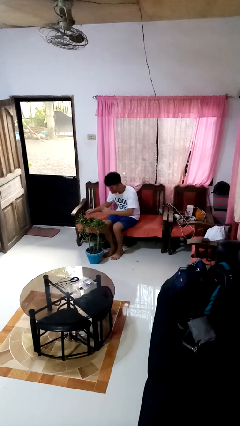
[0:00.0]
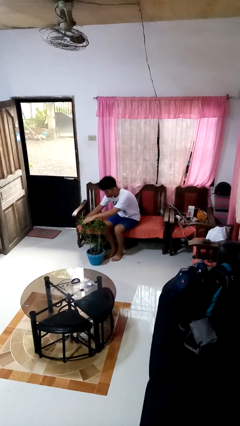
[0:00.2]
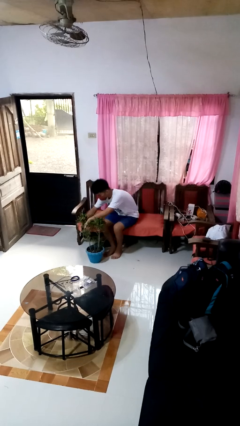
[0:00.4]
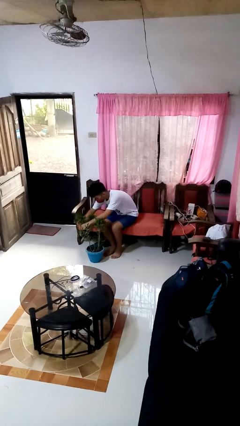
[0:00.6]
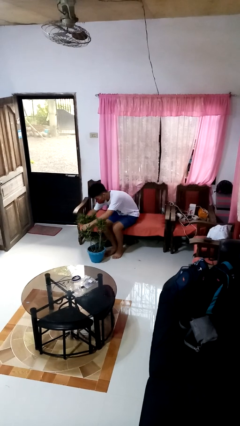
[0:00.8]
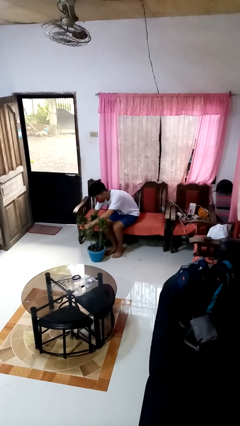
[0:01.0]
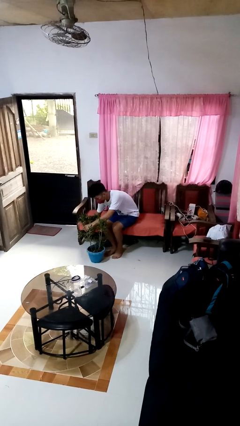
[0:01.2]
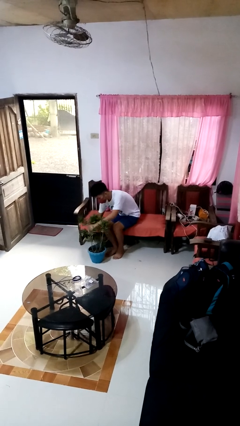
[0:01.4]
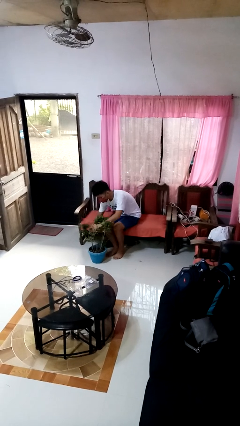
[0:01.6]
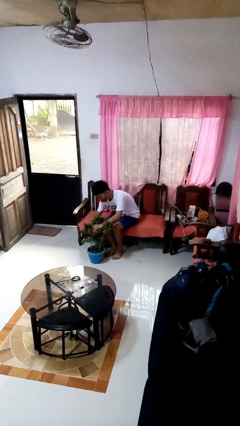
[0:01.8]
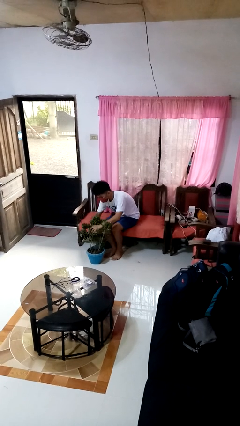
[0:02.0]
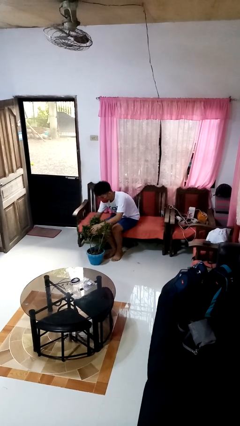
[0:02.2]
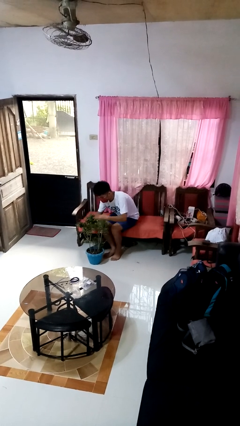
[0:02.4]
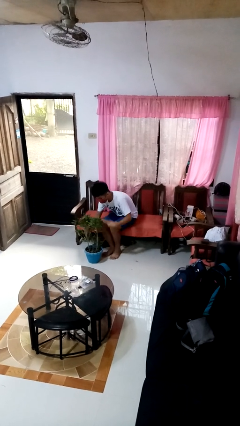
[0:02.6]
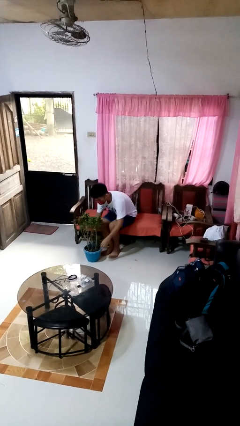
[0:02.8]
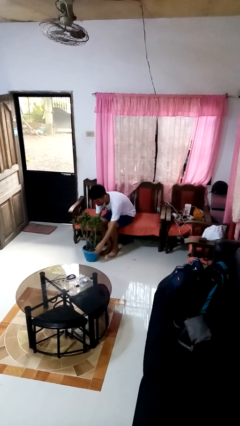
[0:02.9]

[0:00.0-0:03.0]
person arranges flowers in vase

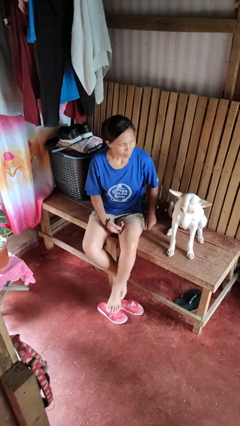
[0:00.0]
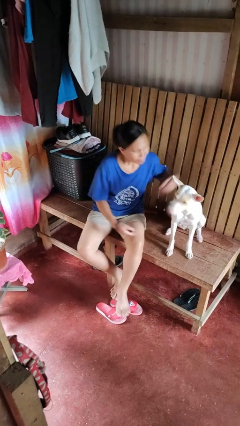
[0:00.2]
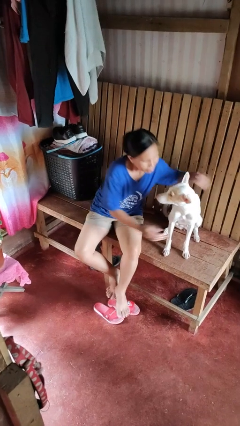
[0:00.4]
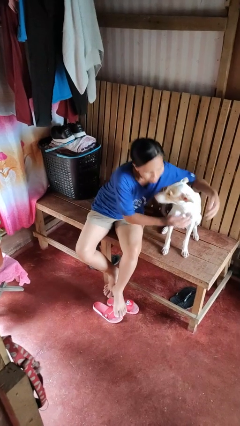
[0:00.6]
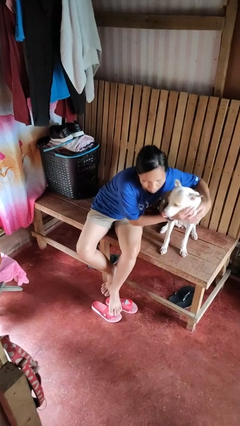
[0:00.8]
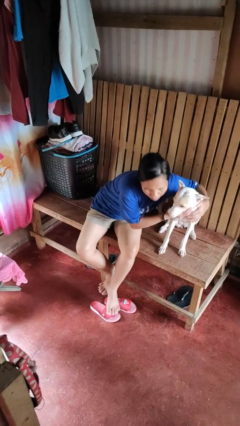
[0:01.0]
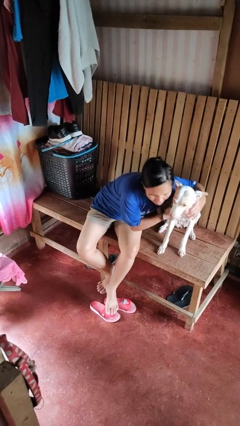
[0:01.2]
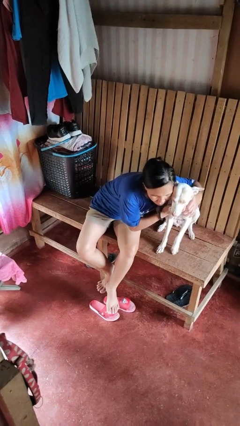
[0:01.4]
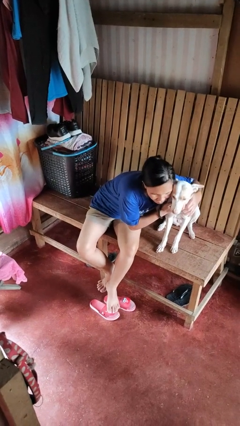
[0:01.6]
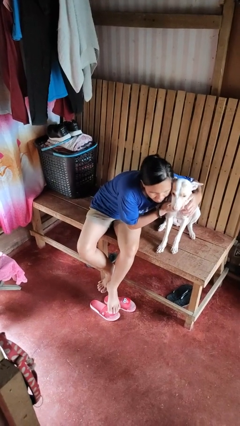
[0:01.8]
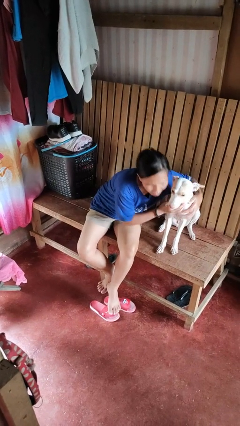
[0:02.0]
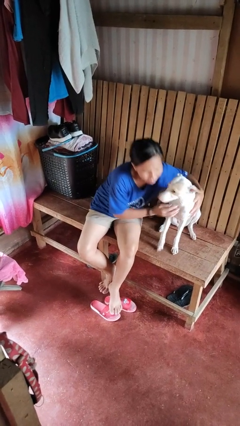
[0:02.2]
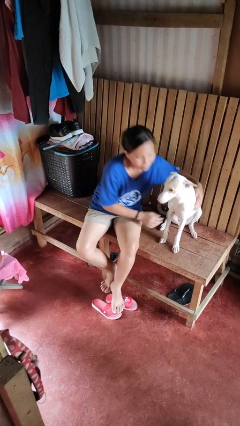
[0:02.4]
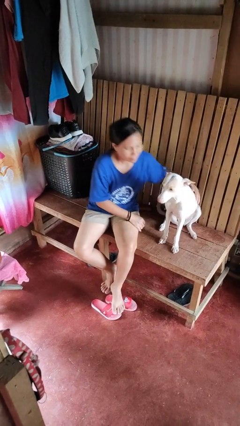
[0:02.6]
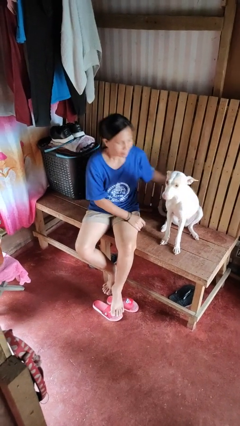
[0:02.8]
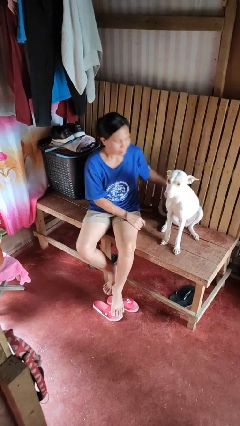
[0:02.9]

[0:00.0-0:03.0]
person hugs dog

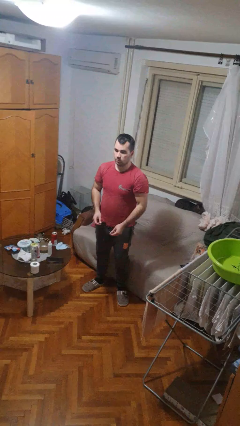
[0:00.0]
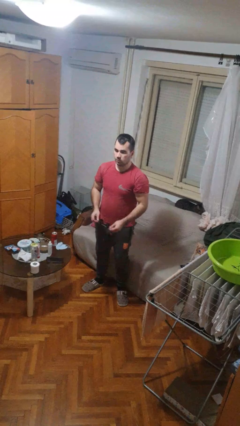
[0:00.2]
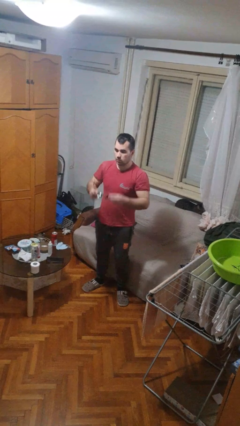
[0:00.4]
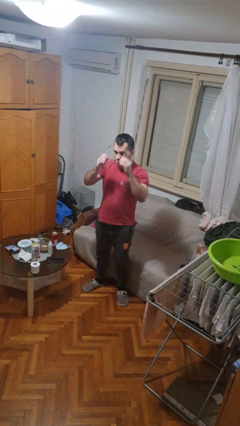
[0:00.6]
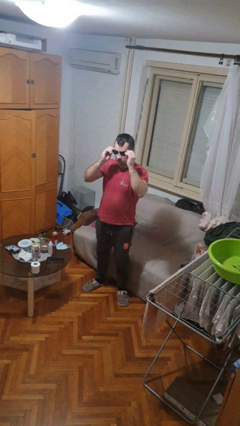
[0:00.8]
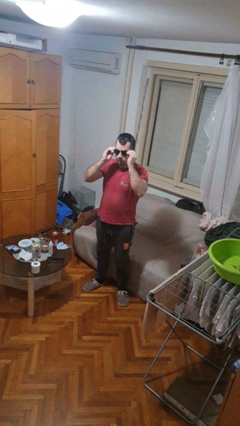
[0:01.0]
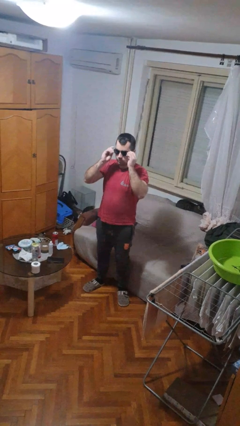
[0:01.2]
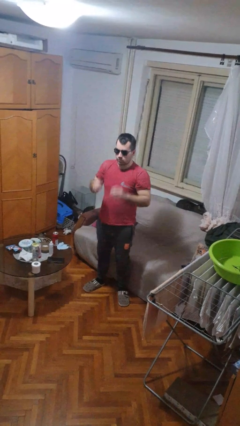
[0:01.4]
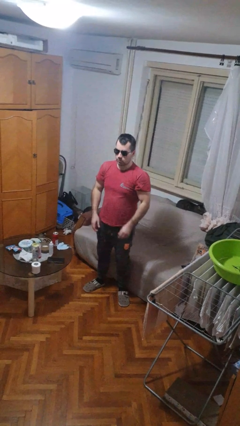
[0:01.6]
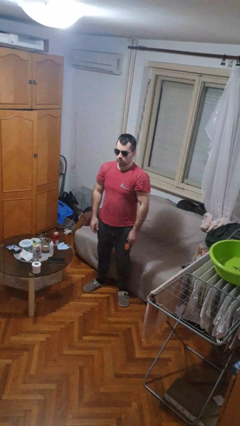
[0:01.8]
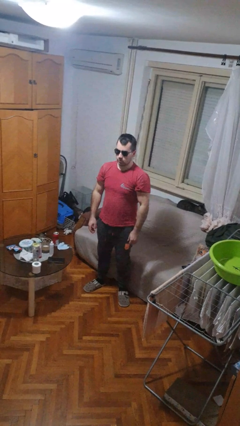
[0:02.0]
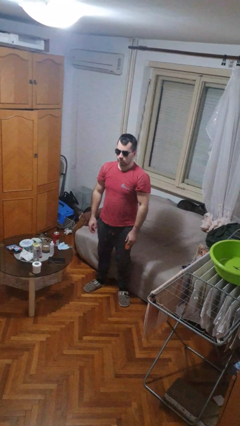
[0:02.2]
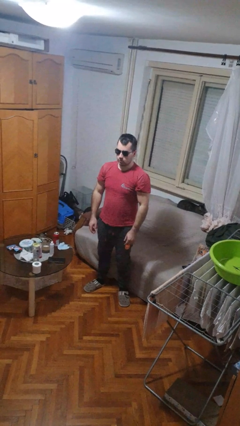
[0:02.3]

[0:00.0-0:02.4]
person puts on sunglasses

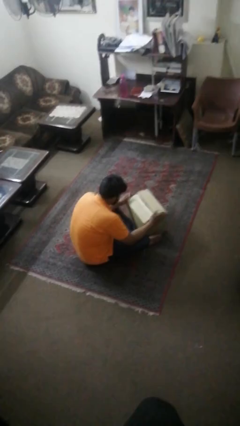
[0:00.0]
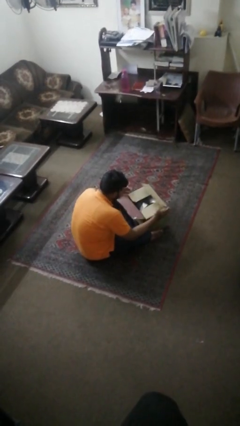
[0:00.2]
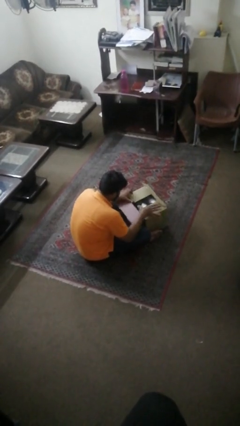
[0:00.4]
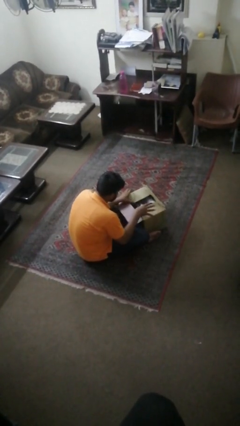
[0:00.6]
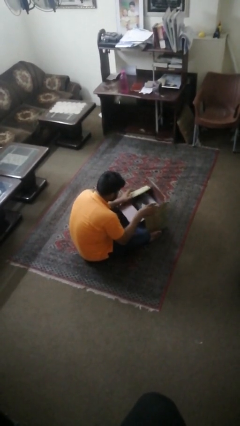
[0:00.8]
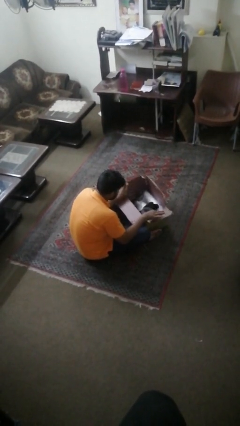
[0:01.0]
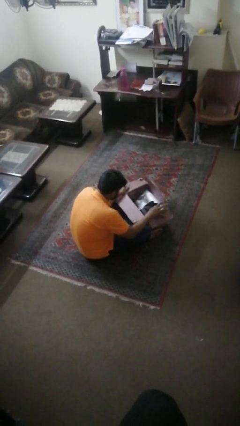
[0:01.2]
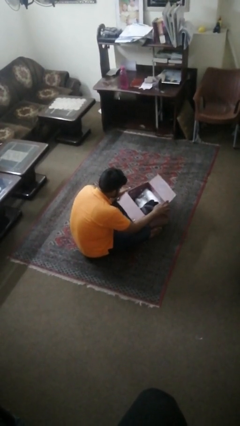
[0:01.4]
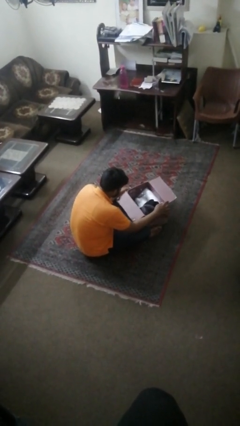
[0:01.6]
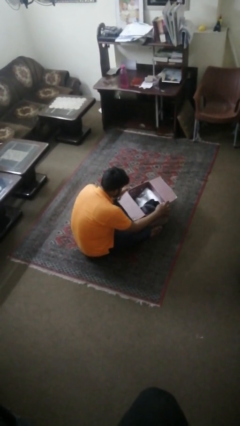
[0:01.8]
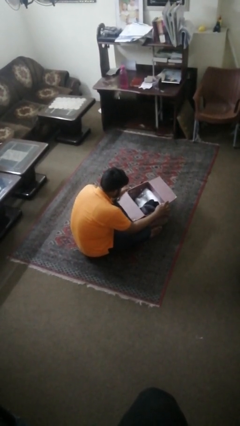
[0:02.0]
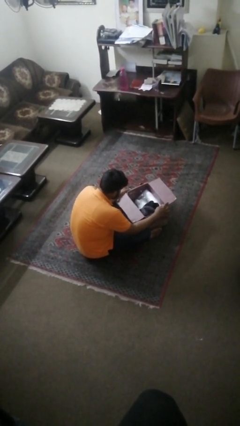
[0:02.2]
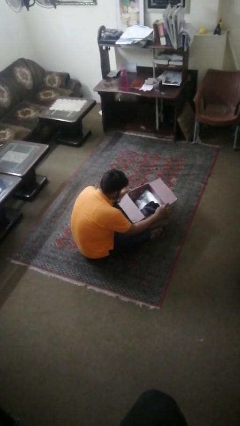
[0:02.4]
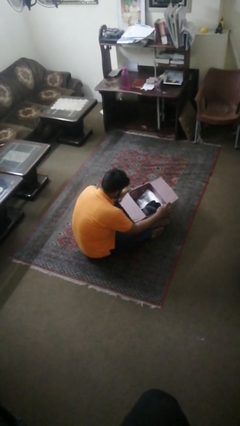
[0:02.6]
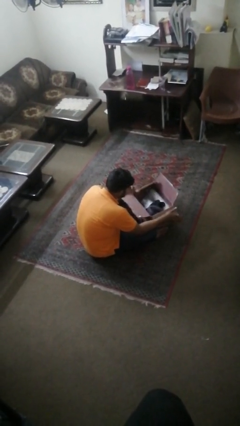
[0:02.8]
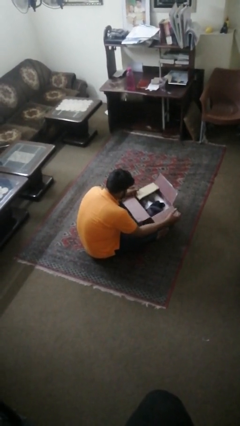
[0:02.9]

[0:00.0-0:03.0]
person opens box

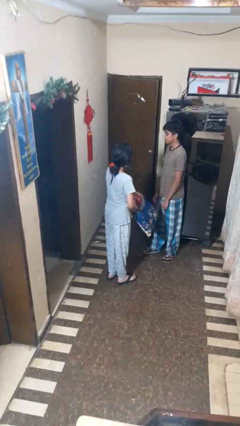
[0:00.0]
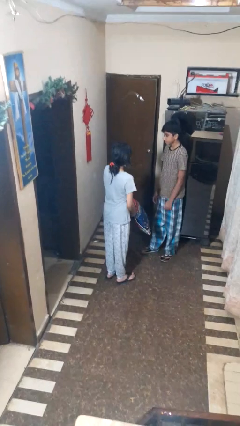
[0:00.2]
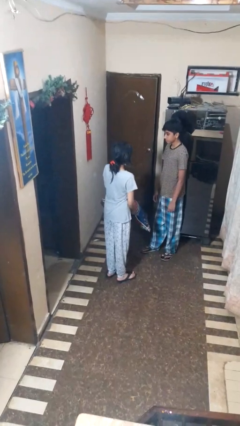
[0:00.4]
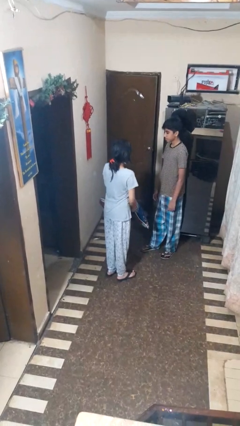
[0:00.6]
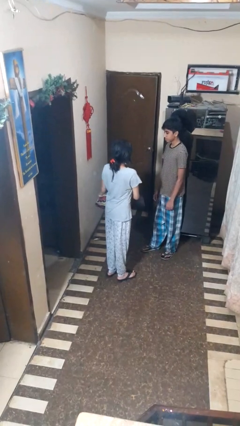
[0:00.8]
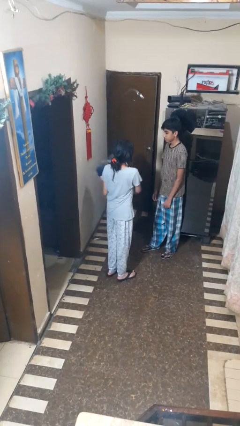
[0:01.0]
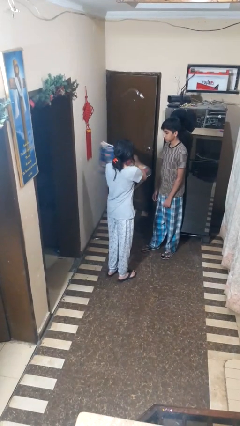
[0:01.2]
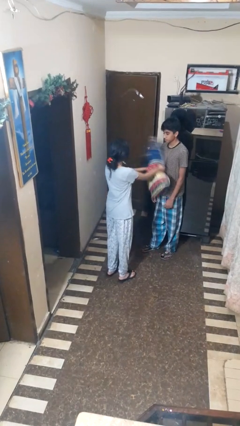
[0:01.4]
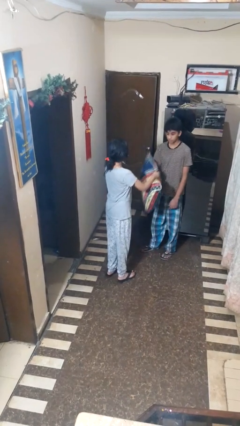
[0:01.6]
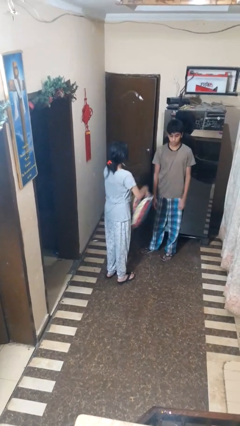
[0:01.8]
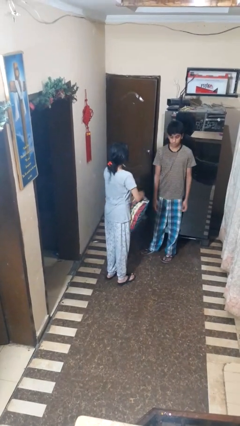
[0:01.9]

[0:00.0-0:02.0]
person hits person with pillow

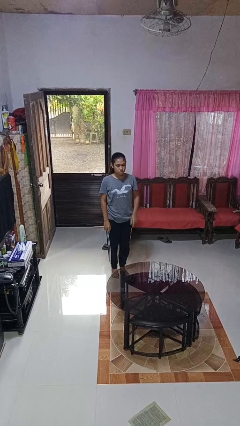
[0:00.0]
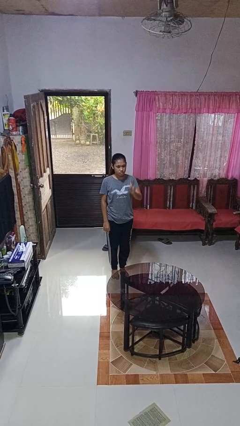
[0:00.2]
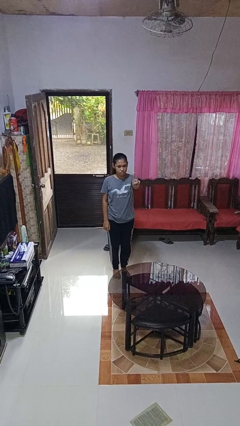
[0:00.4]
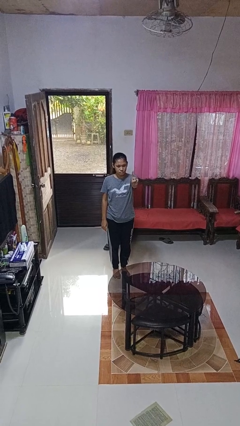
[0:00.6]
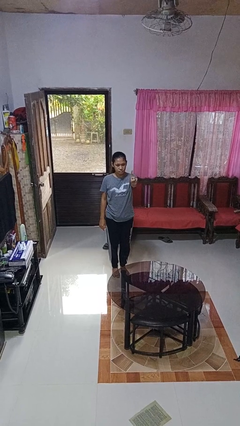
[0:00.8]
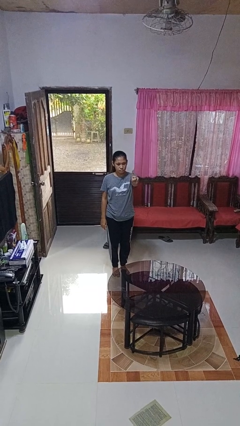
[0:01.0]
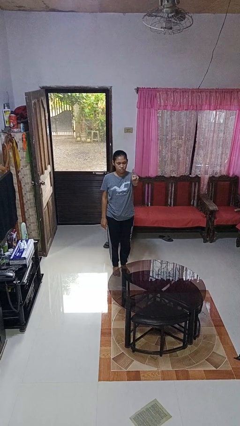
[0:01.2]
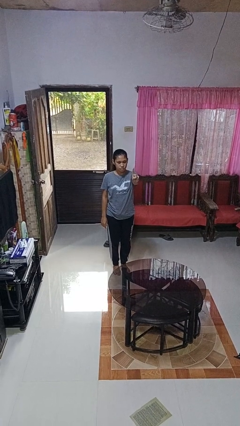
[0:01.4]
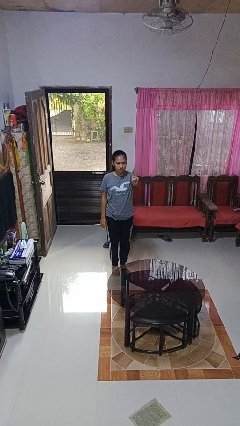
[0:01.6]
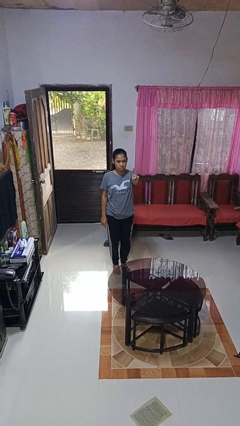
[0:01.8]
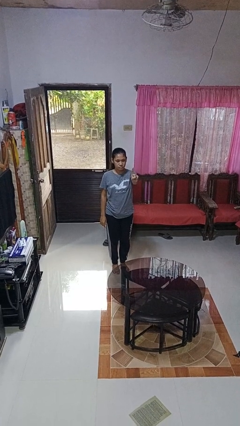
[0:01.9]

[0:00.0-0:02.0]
person gestures number one

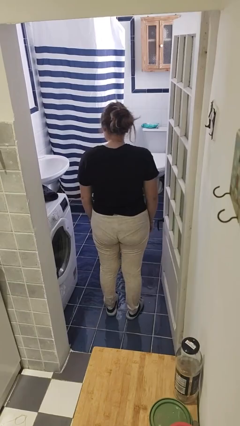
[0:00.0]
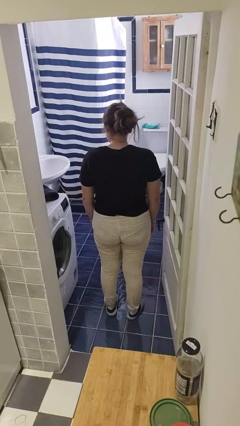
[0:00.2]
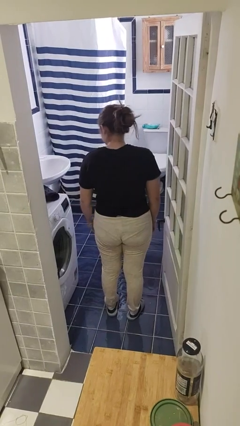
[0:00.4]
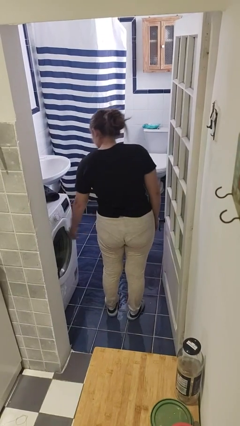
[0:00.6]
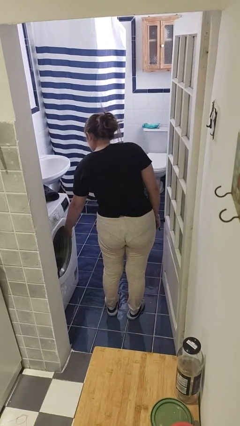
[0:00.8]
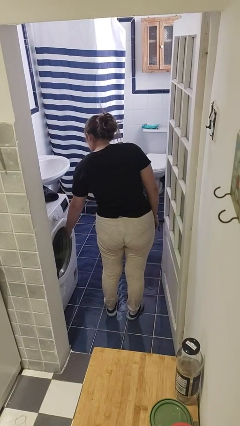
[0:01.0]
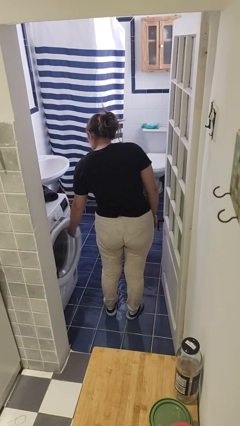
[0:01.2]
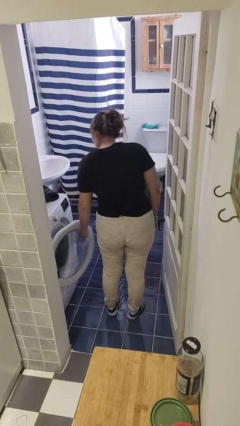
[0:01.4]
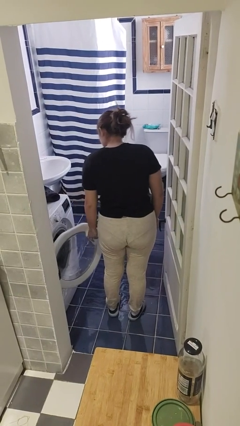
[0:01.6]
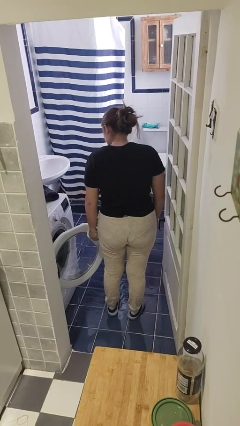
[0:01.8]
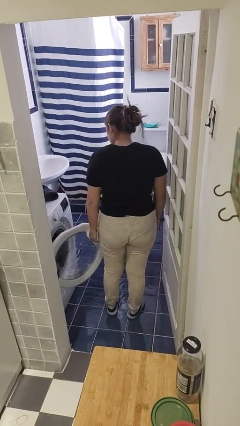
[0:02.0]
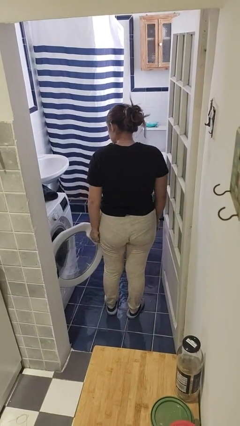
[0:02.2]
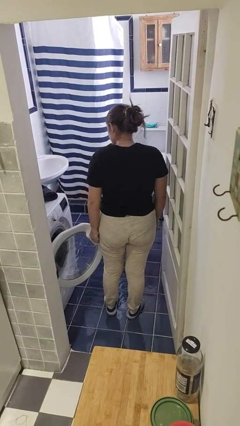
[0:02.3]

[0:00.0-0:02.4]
person opens clothes washer
